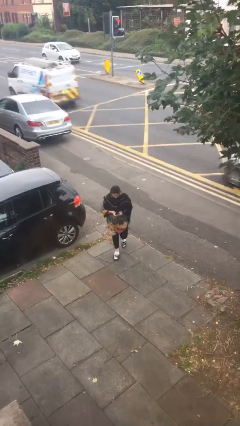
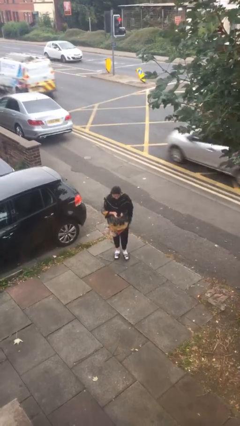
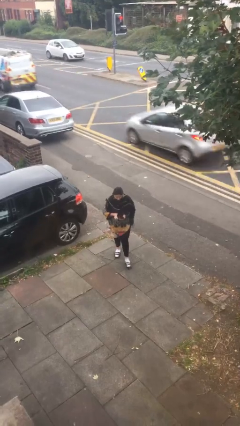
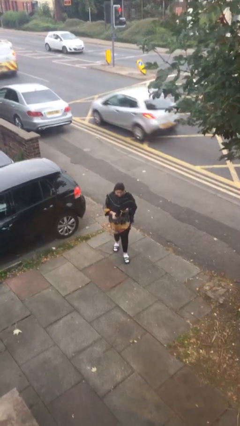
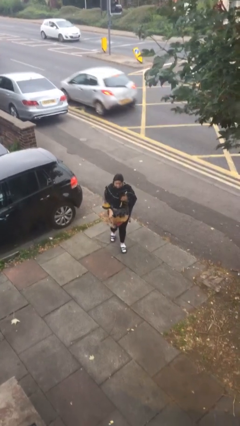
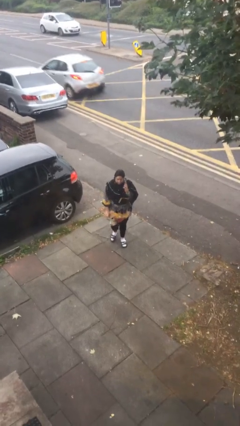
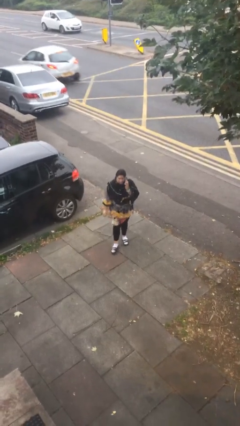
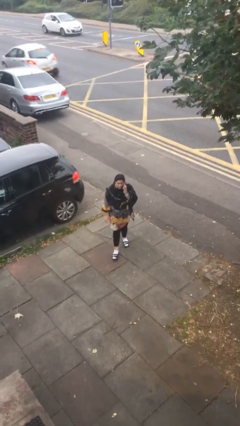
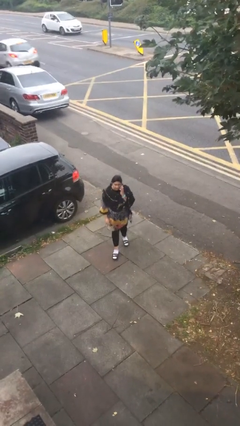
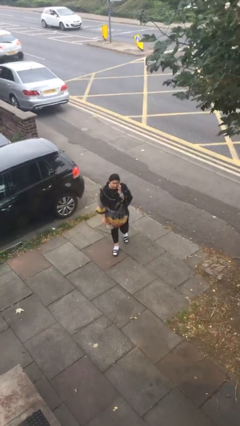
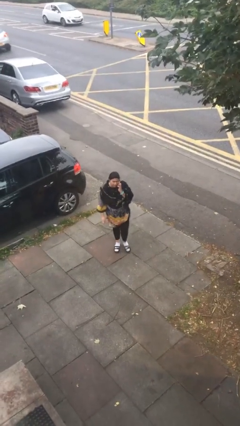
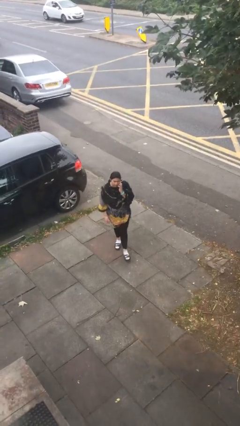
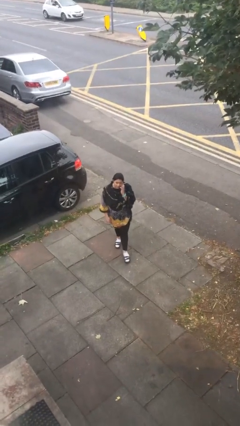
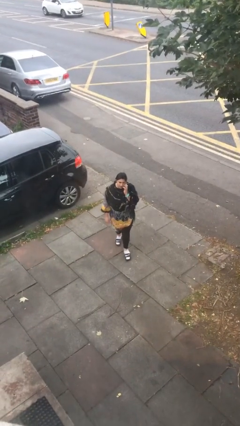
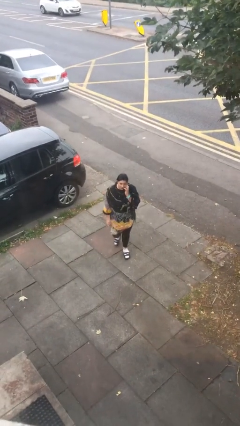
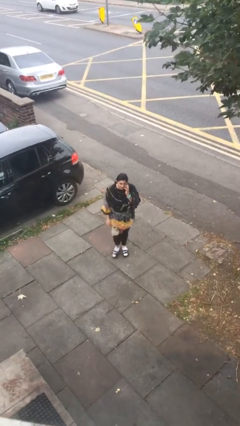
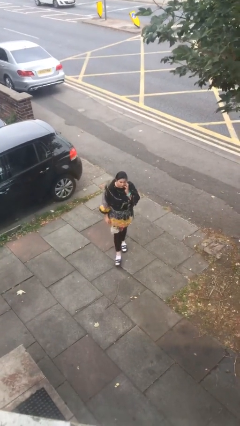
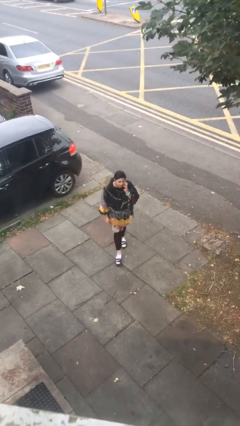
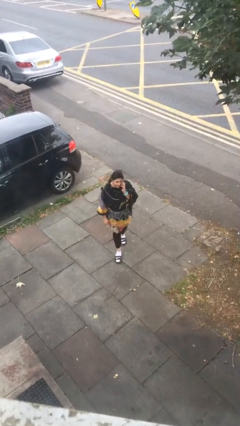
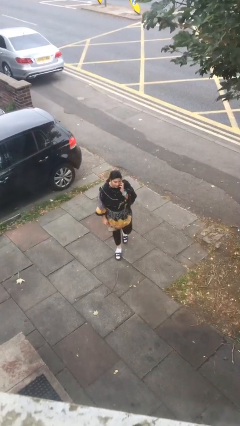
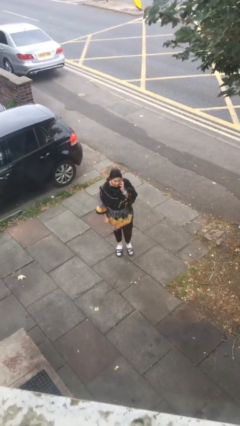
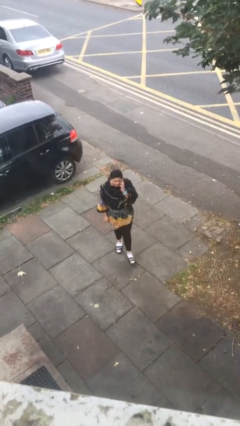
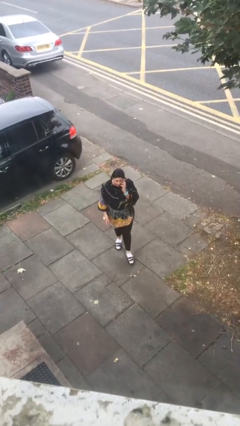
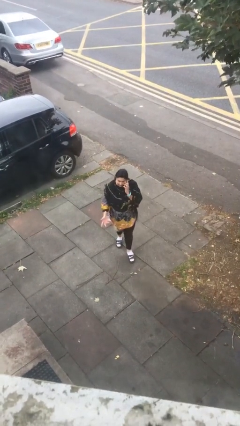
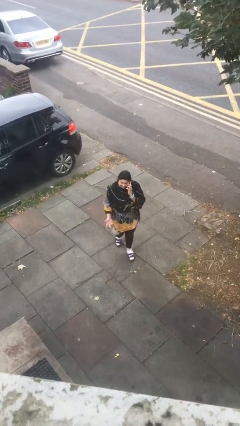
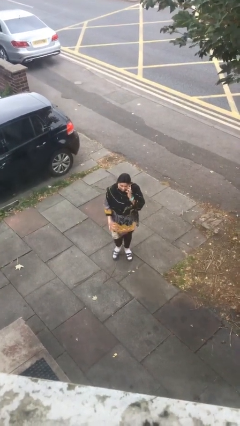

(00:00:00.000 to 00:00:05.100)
person talks on phone

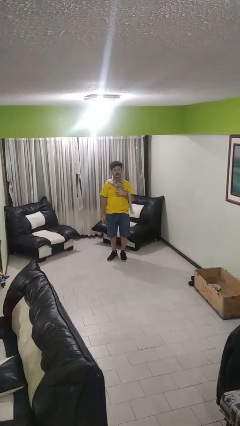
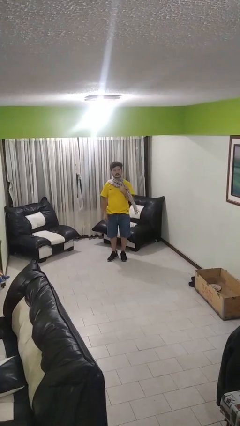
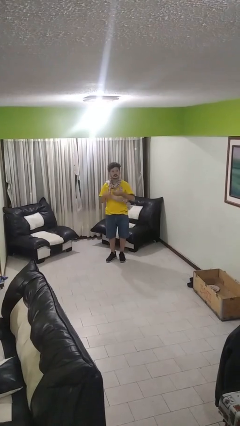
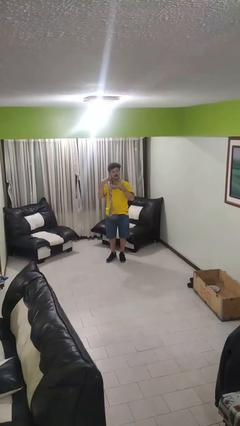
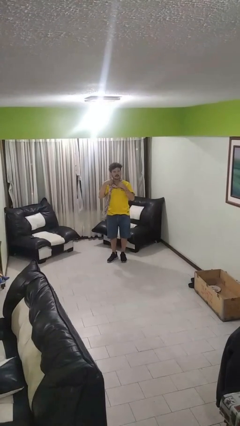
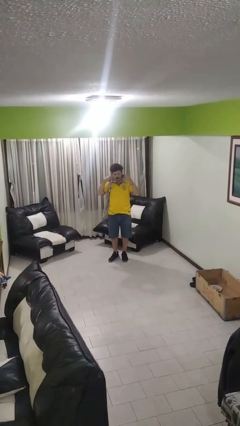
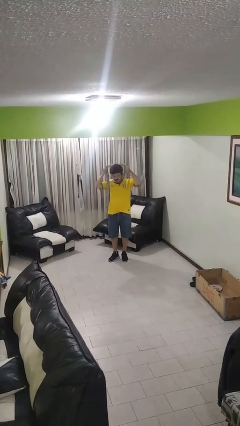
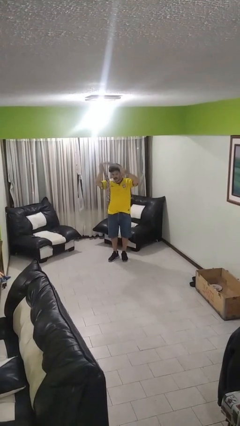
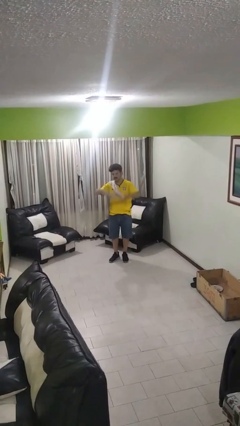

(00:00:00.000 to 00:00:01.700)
person takes off scarf

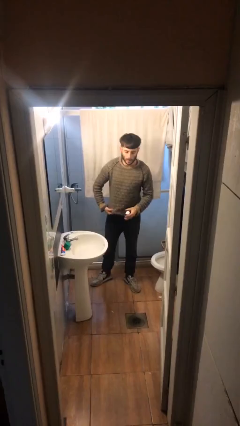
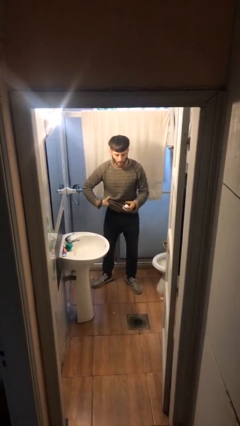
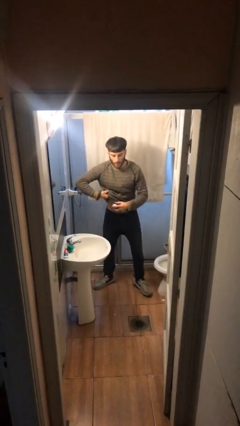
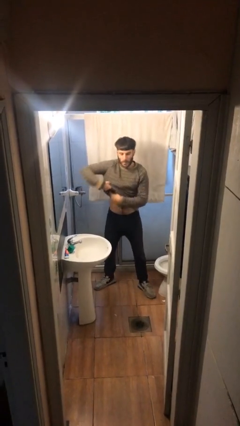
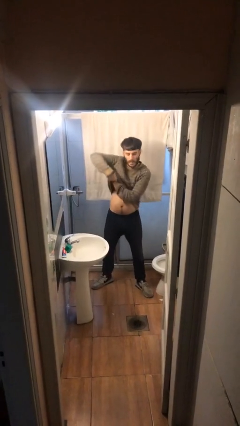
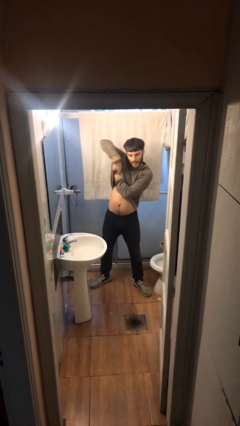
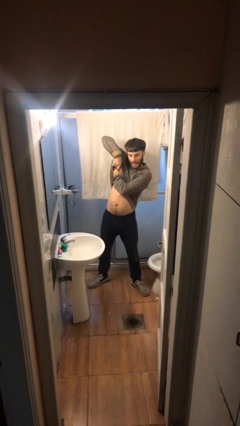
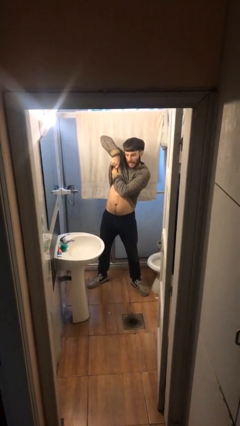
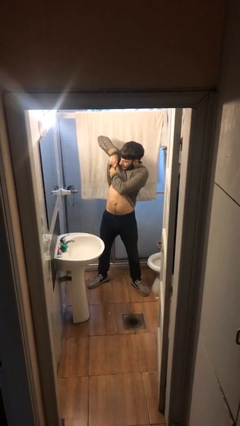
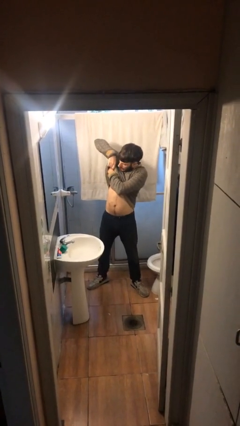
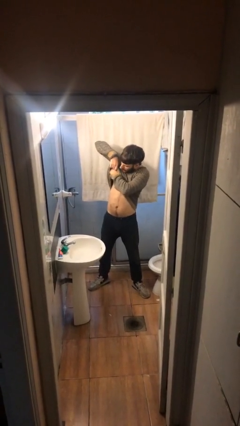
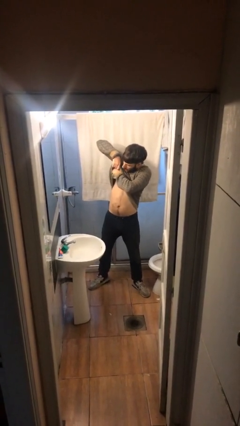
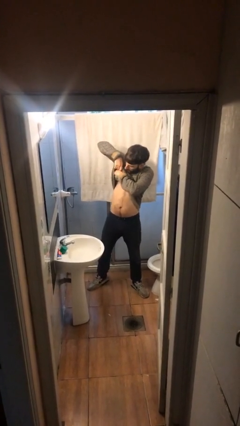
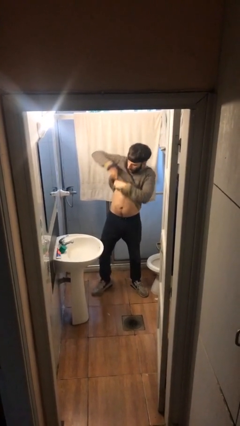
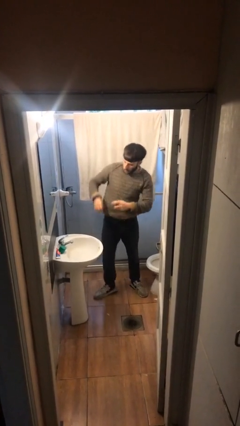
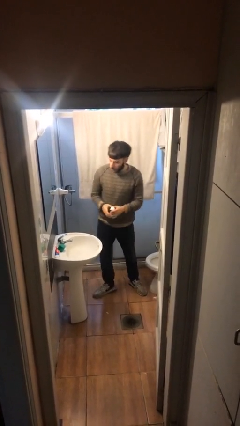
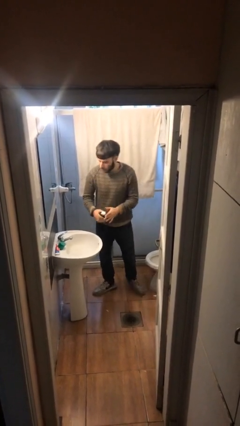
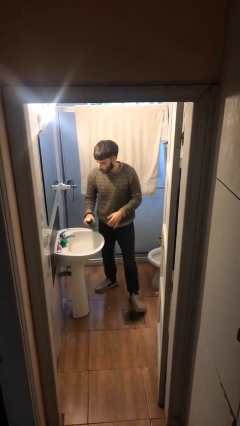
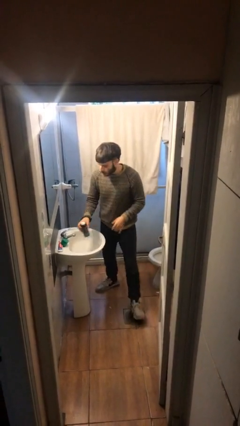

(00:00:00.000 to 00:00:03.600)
person applies deodorant

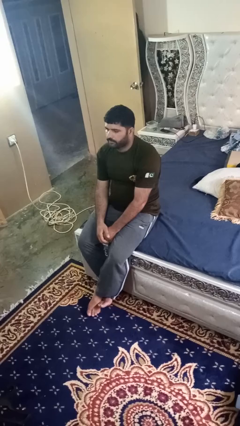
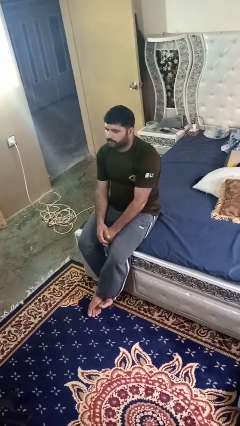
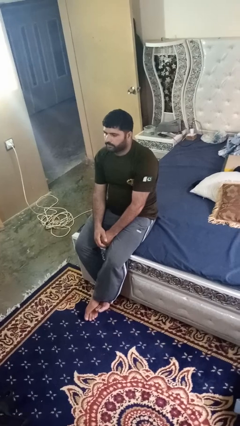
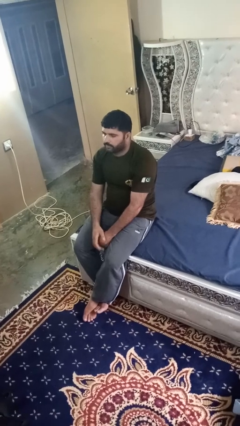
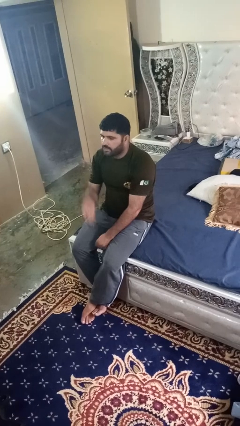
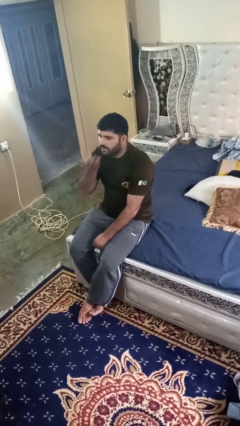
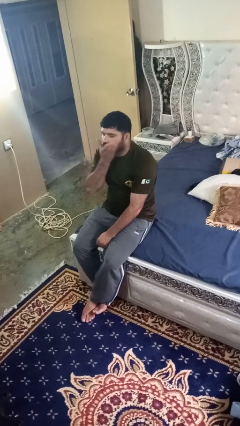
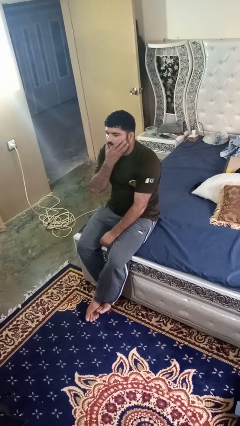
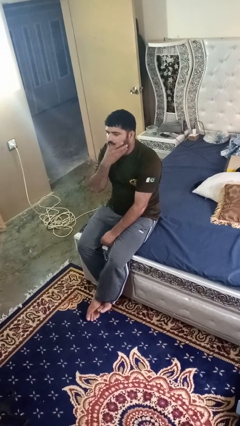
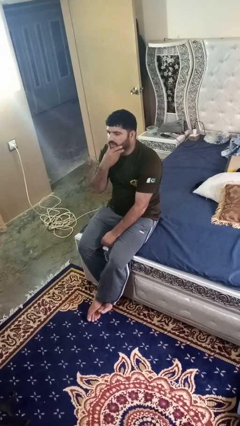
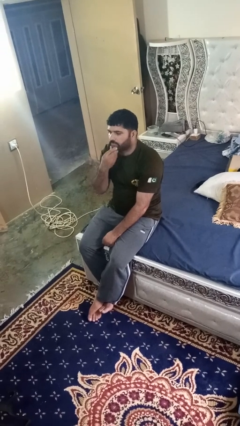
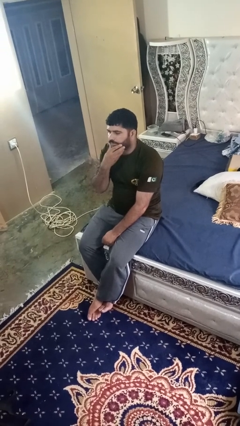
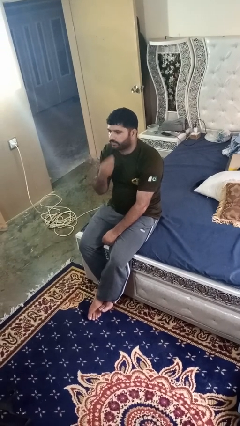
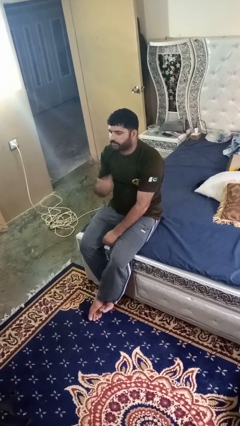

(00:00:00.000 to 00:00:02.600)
person strokes chin

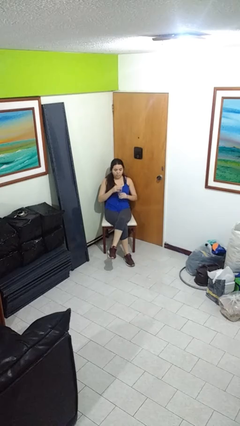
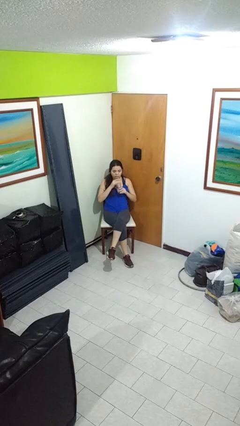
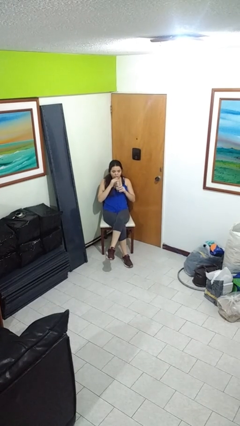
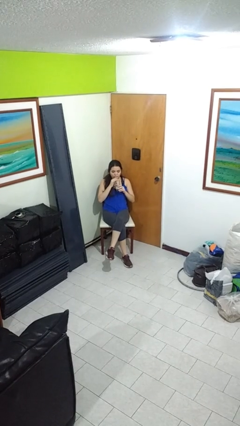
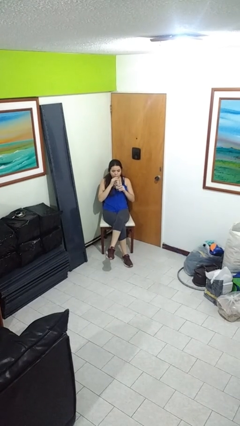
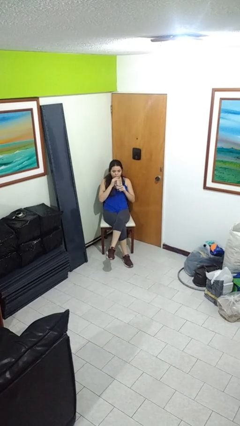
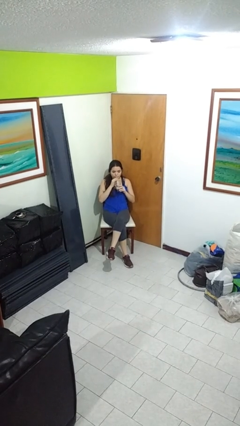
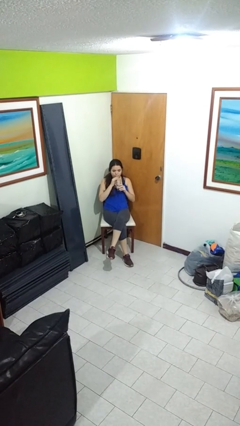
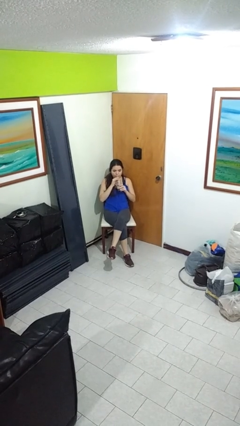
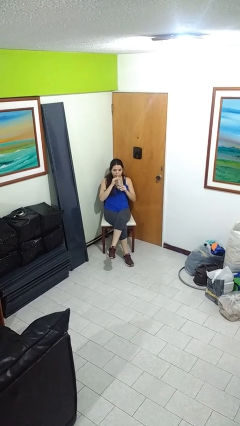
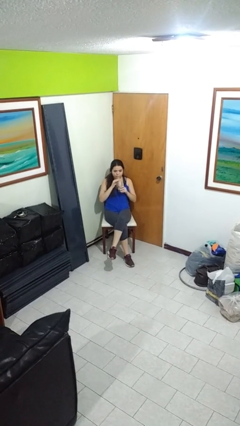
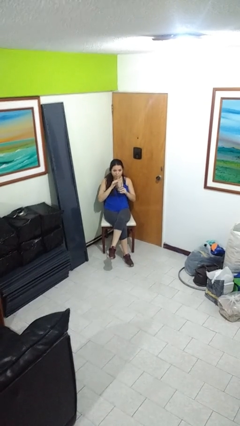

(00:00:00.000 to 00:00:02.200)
person drinks from straw

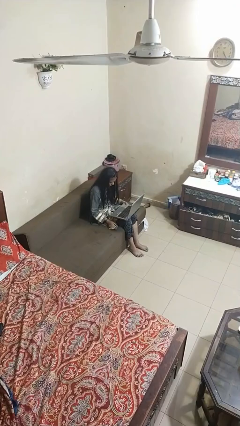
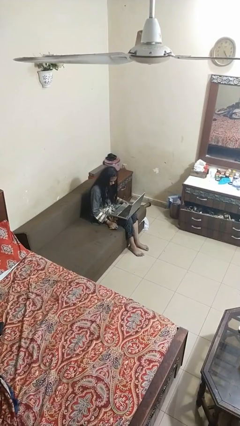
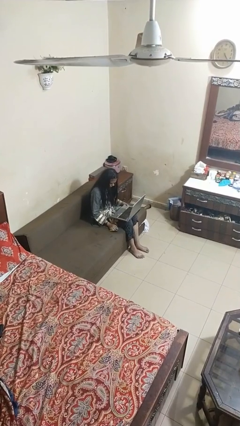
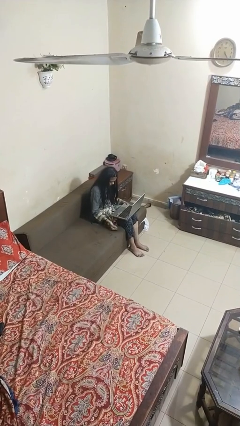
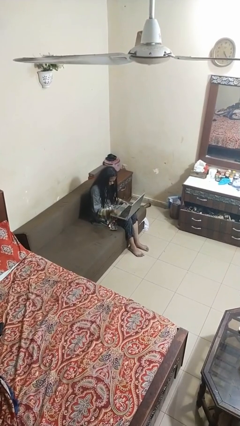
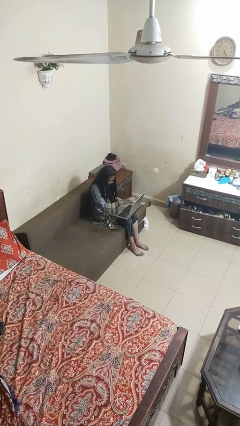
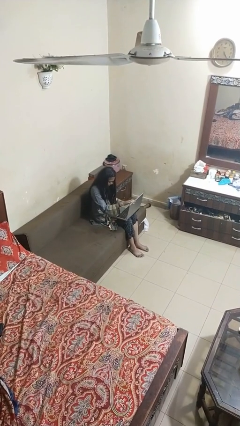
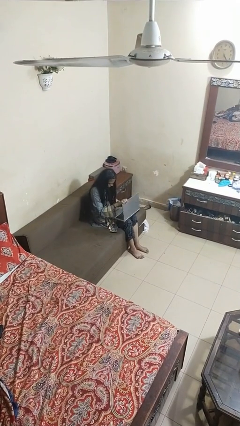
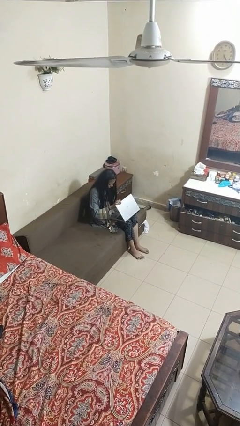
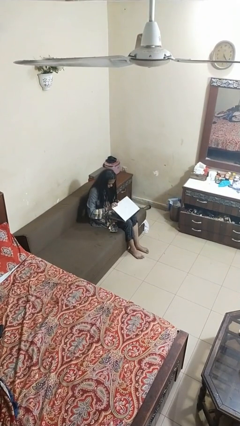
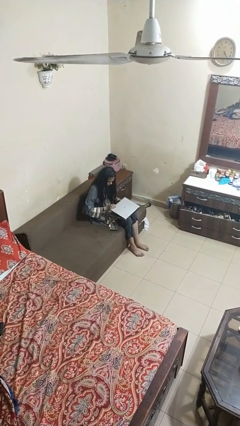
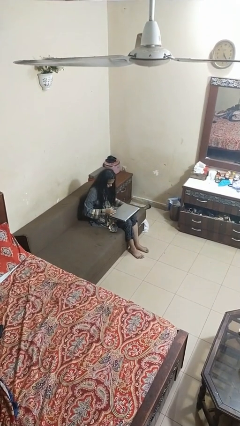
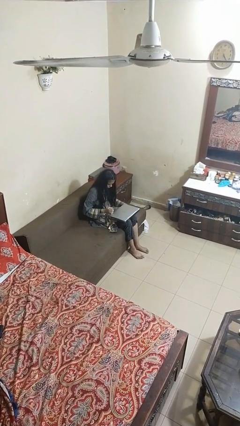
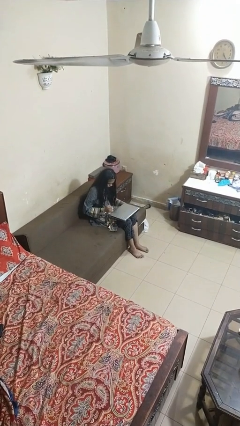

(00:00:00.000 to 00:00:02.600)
person closes laptop
